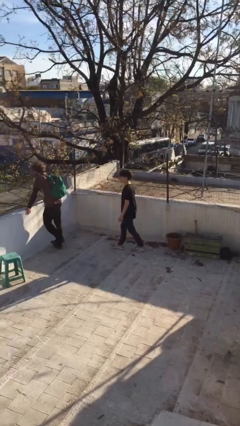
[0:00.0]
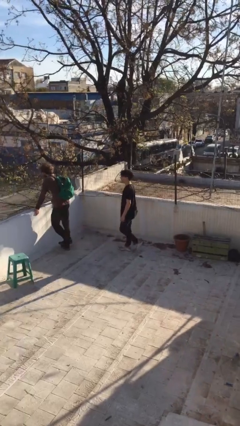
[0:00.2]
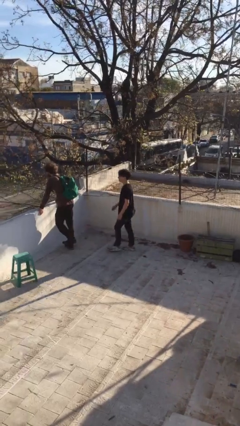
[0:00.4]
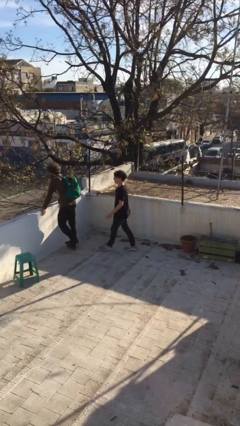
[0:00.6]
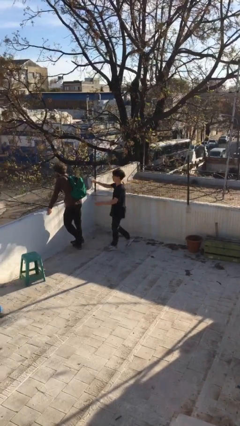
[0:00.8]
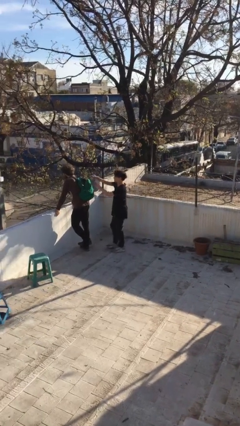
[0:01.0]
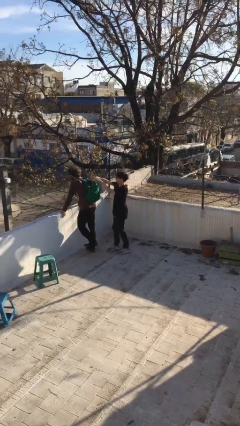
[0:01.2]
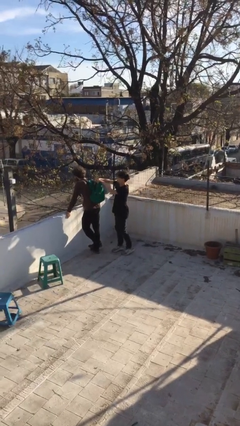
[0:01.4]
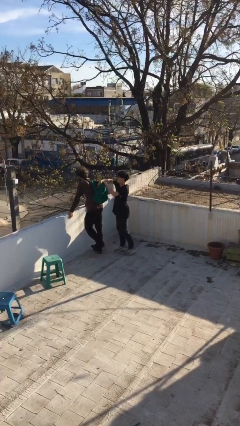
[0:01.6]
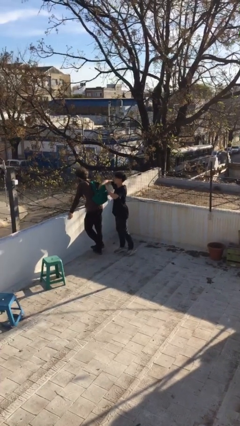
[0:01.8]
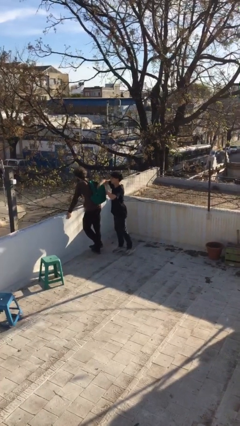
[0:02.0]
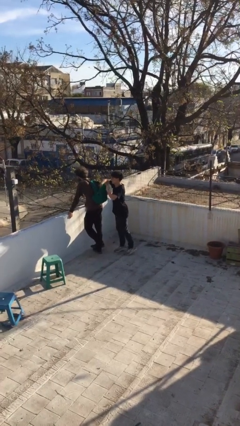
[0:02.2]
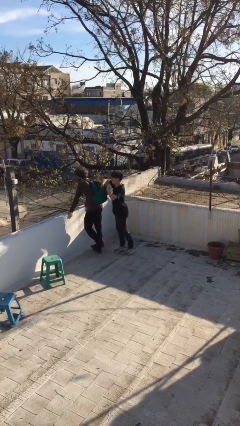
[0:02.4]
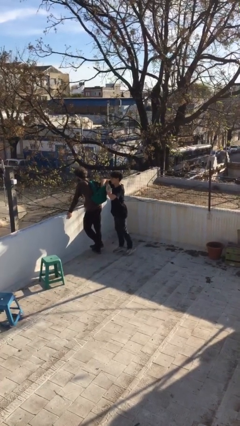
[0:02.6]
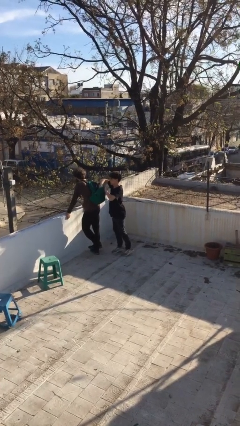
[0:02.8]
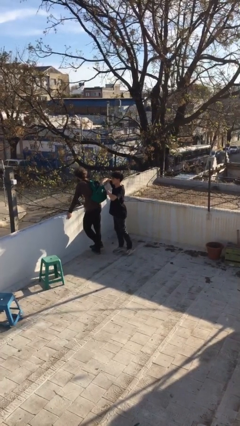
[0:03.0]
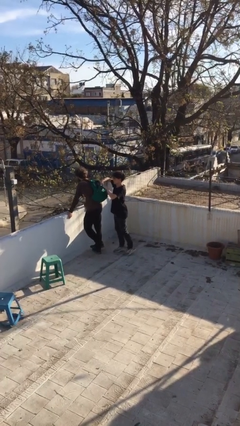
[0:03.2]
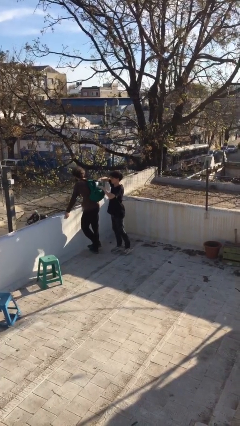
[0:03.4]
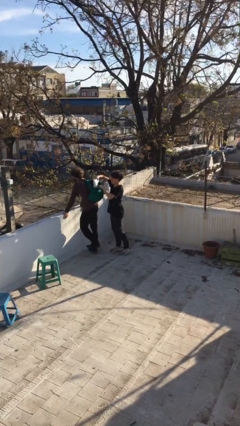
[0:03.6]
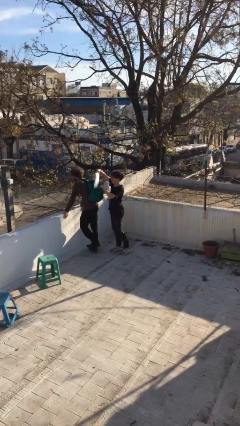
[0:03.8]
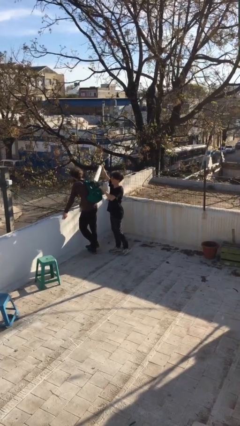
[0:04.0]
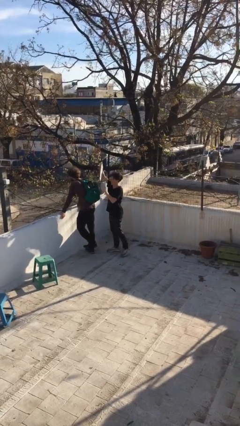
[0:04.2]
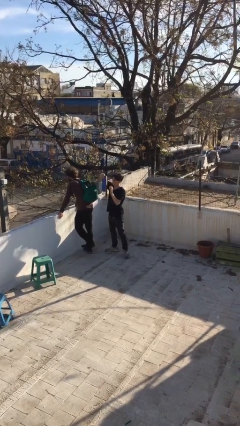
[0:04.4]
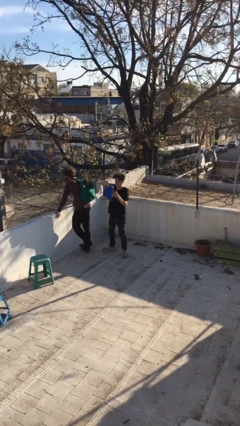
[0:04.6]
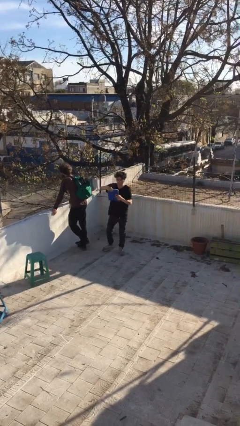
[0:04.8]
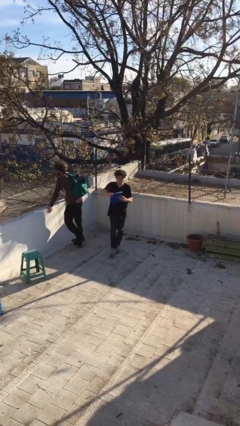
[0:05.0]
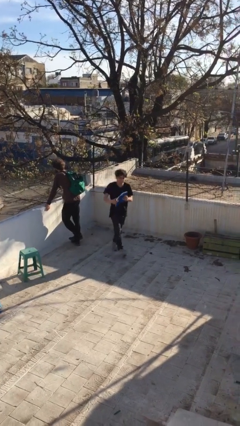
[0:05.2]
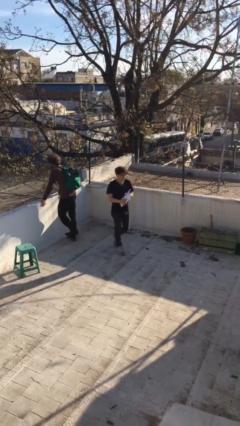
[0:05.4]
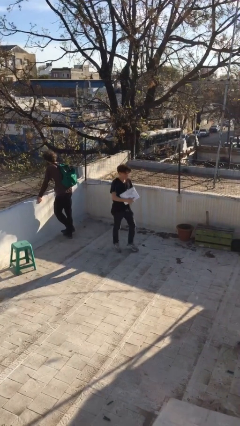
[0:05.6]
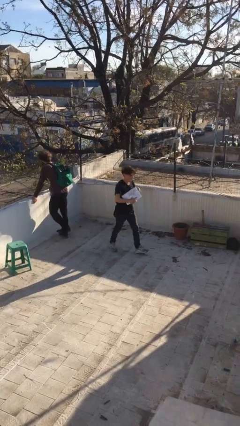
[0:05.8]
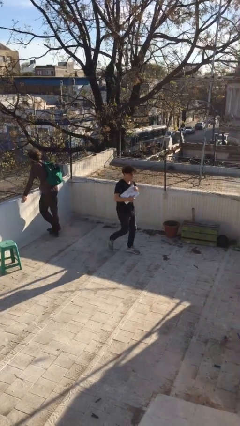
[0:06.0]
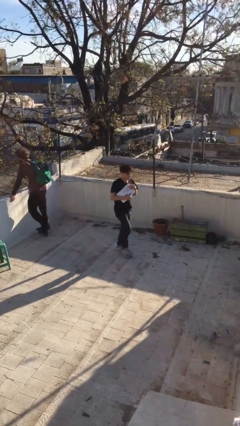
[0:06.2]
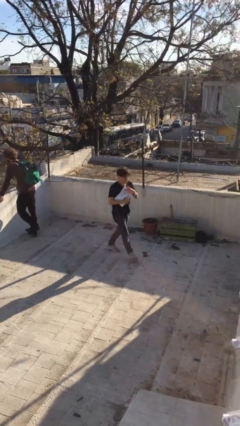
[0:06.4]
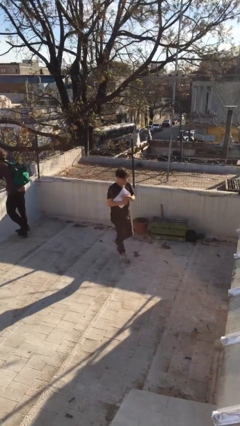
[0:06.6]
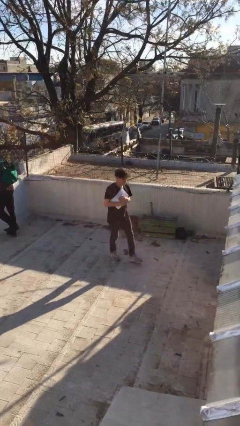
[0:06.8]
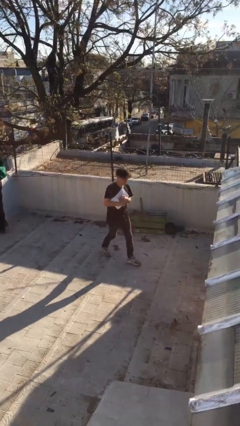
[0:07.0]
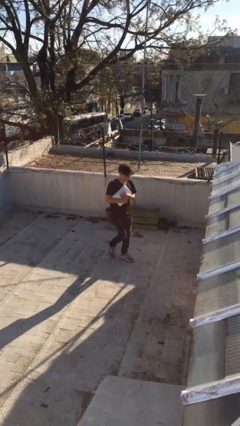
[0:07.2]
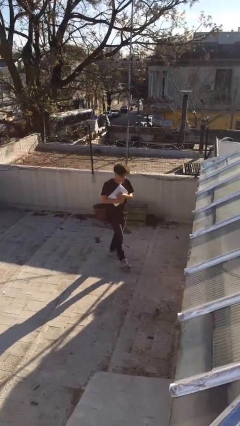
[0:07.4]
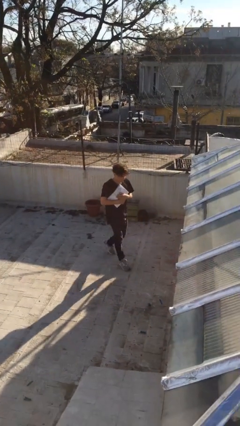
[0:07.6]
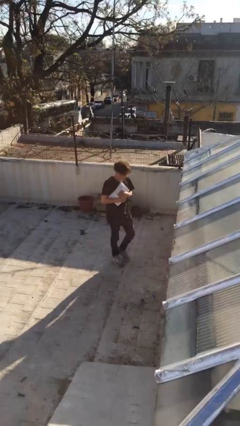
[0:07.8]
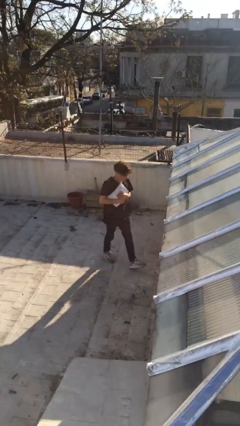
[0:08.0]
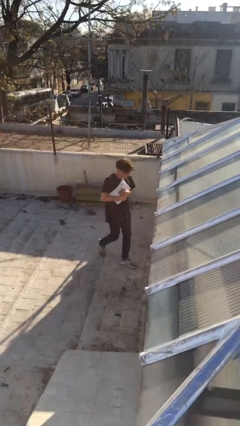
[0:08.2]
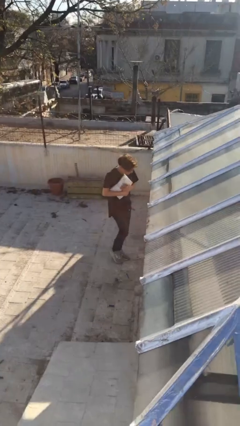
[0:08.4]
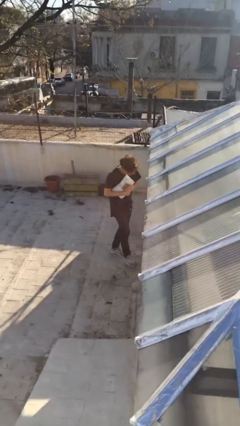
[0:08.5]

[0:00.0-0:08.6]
person steals object from person

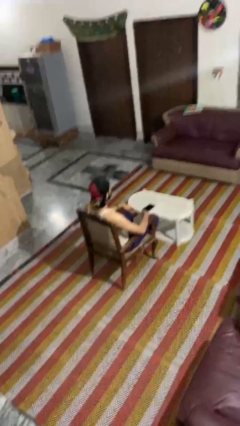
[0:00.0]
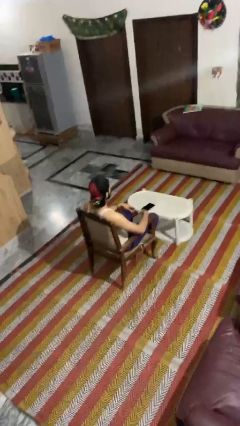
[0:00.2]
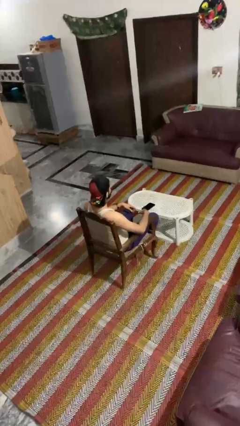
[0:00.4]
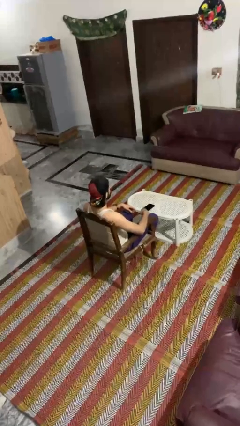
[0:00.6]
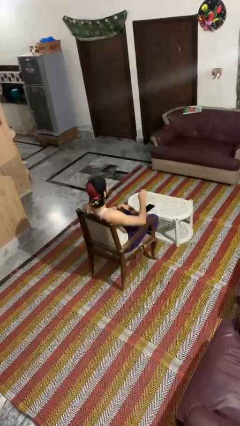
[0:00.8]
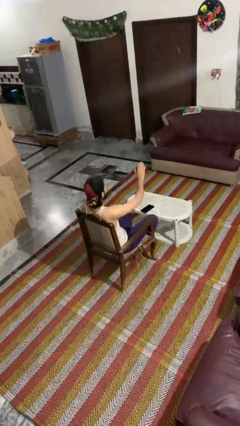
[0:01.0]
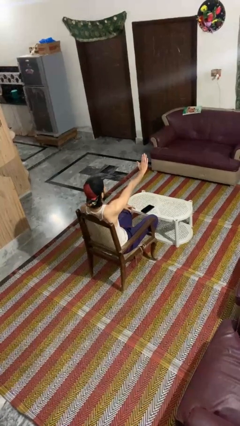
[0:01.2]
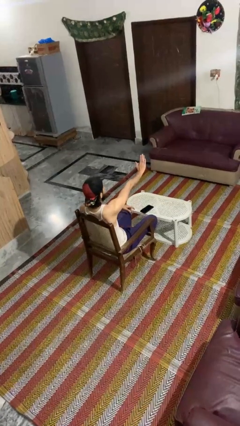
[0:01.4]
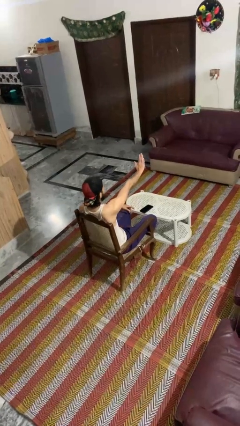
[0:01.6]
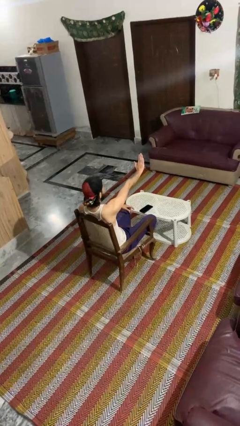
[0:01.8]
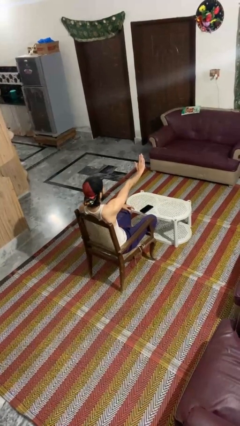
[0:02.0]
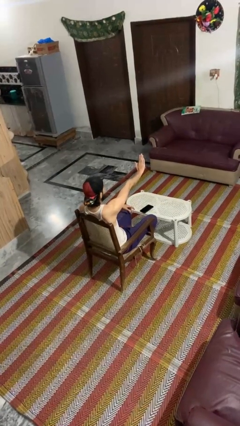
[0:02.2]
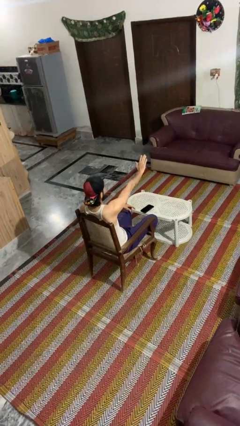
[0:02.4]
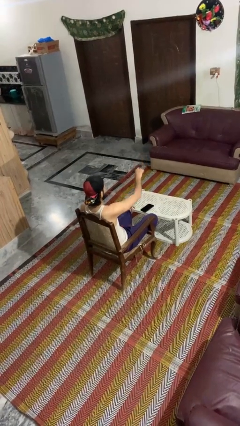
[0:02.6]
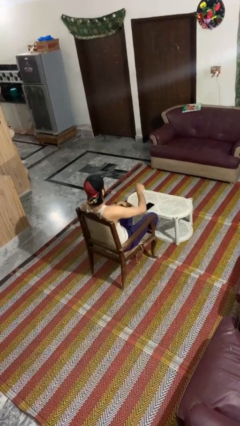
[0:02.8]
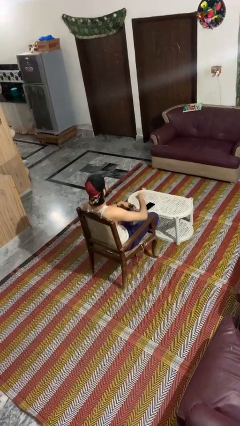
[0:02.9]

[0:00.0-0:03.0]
person gestures stop

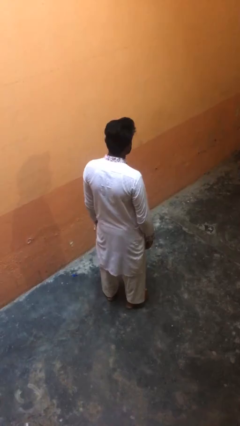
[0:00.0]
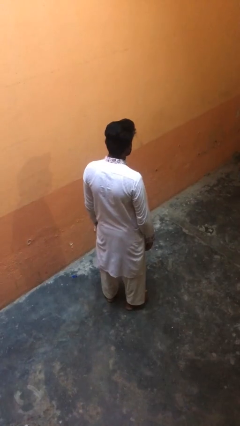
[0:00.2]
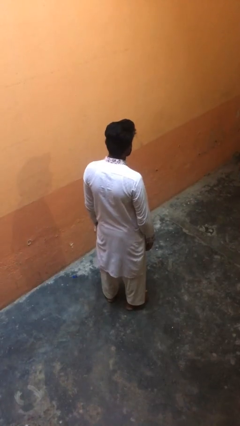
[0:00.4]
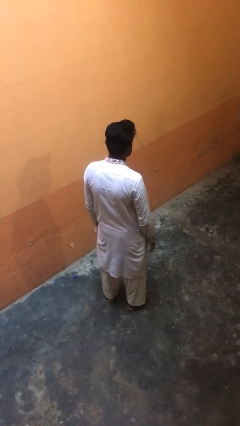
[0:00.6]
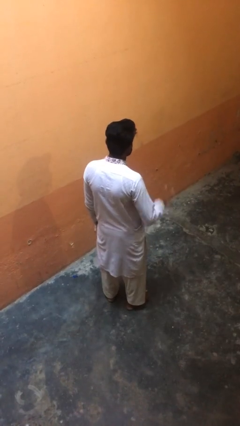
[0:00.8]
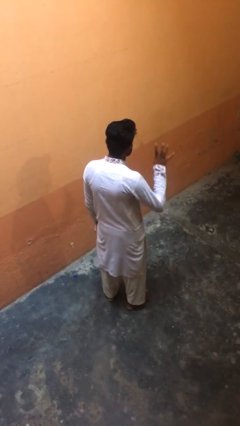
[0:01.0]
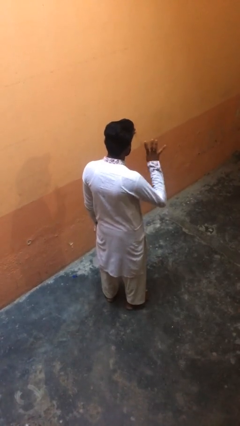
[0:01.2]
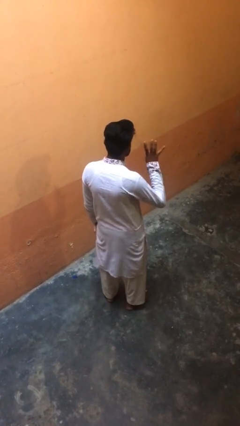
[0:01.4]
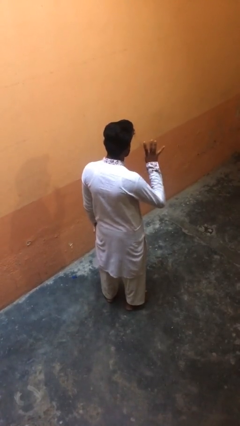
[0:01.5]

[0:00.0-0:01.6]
person gestures number four

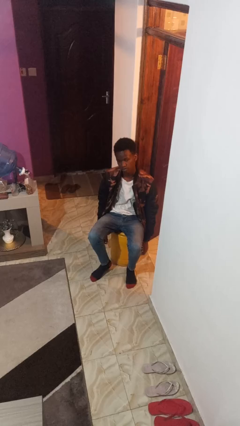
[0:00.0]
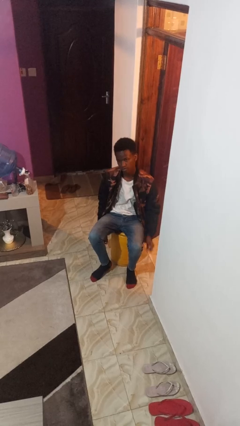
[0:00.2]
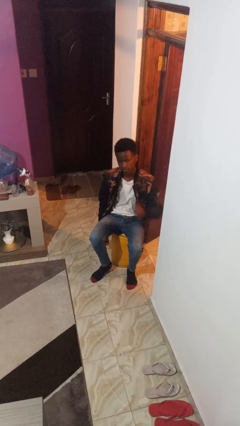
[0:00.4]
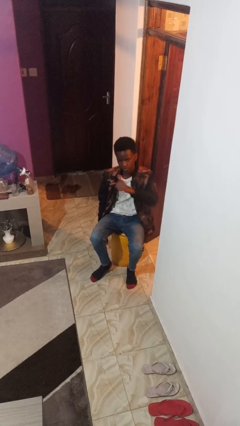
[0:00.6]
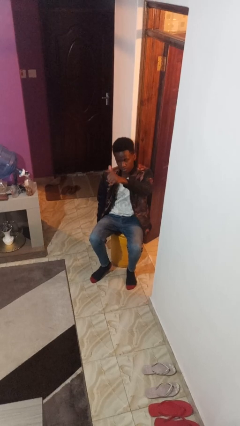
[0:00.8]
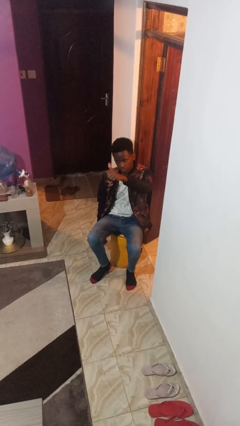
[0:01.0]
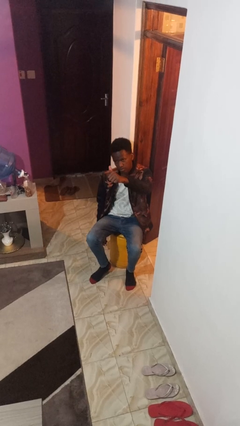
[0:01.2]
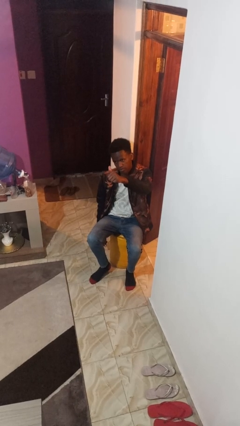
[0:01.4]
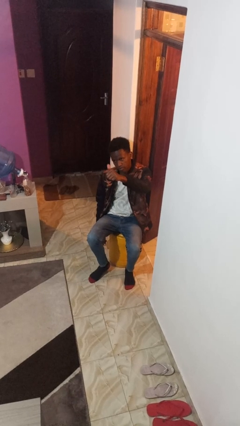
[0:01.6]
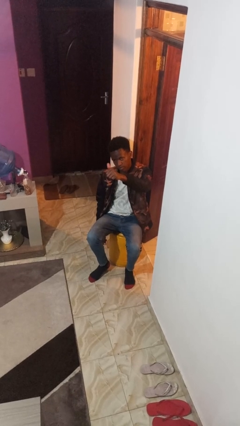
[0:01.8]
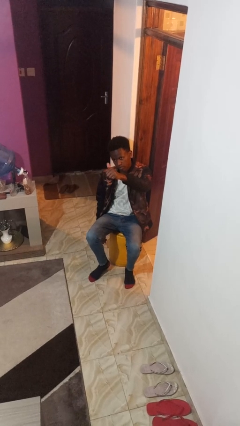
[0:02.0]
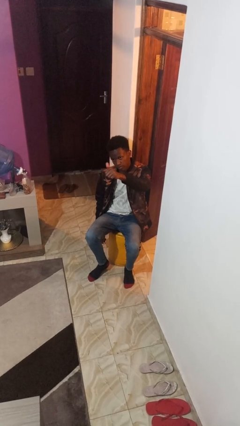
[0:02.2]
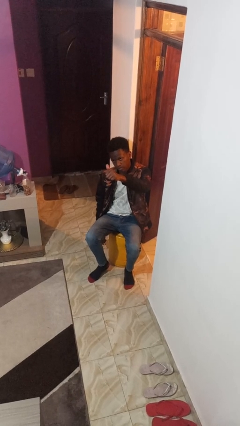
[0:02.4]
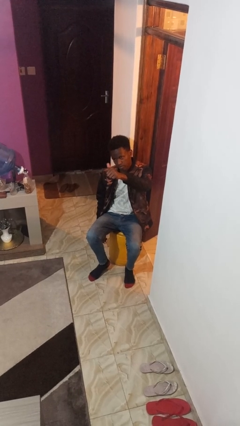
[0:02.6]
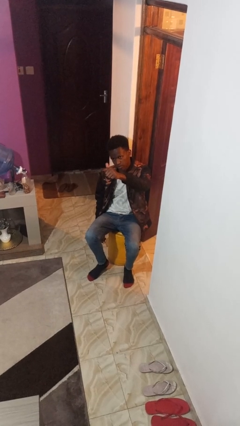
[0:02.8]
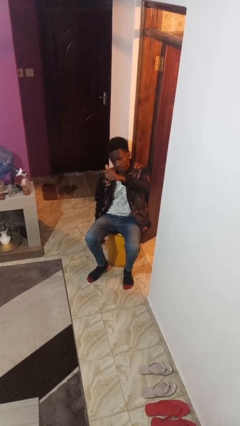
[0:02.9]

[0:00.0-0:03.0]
person gestures thumbs up

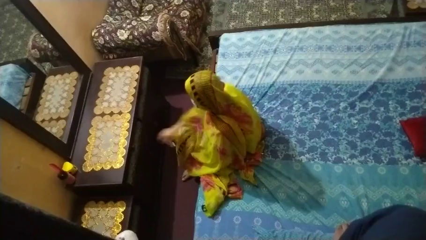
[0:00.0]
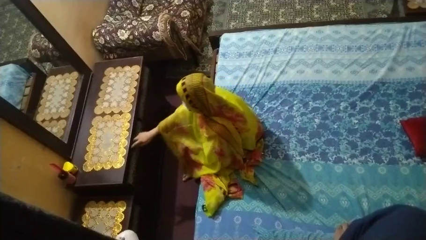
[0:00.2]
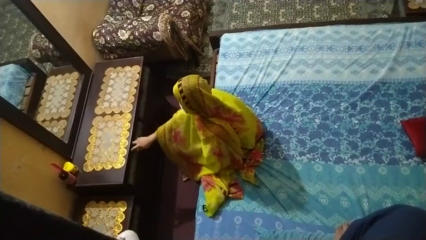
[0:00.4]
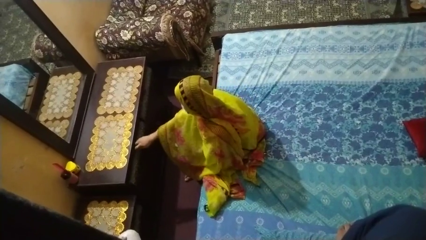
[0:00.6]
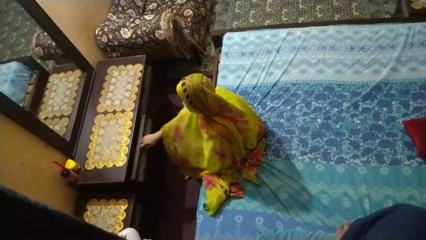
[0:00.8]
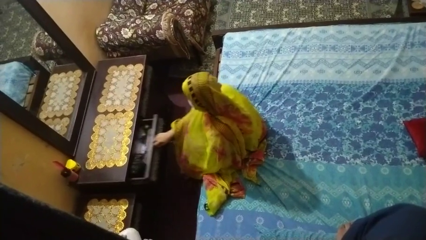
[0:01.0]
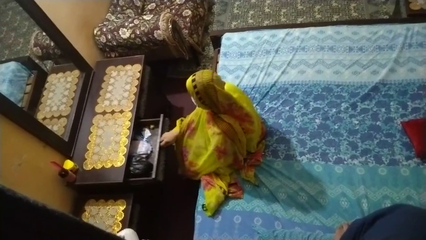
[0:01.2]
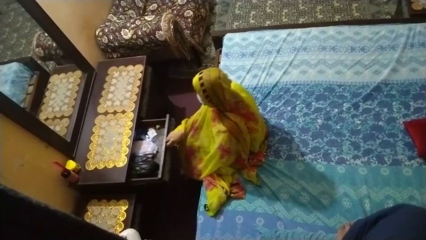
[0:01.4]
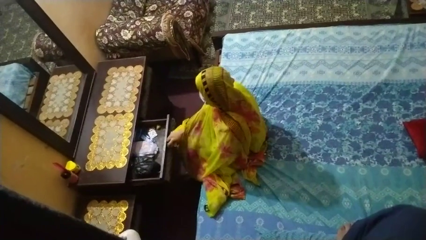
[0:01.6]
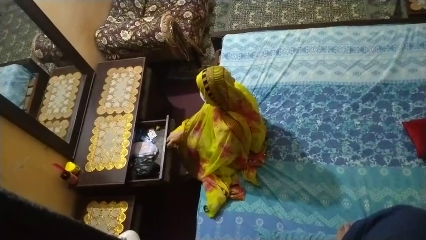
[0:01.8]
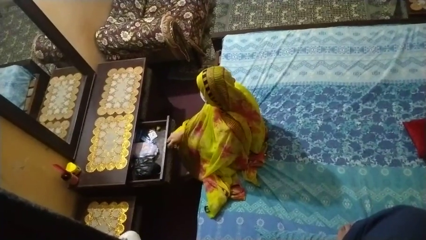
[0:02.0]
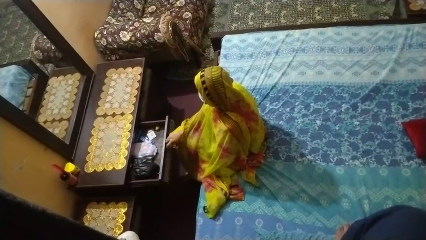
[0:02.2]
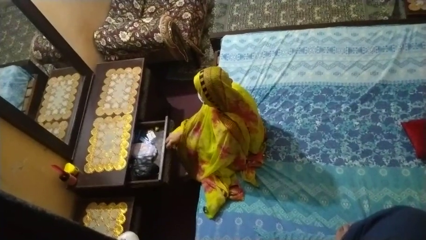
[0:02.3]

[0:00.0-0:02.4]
person opens dresser drawer
